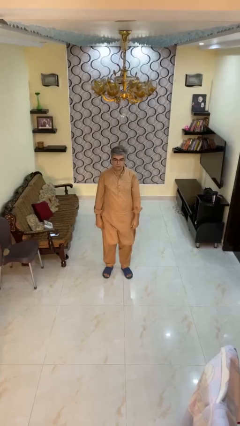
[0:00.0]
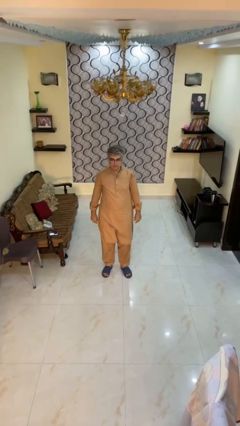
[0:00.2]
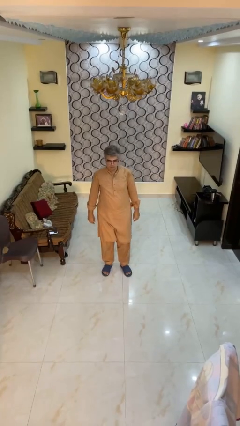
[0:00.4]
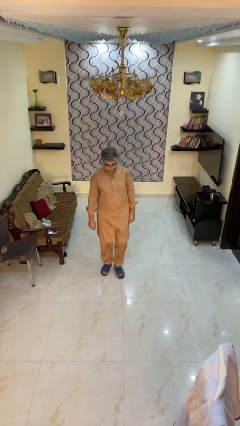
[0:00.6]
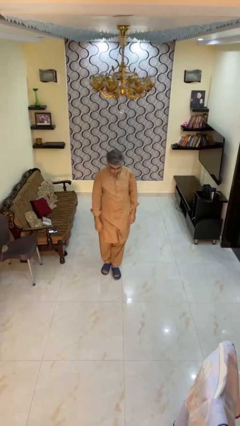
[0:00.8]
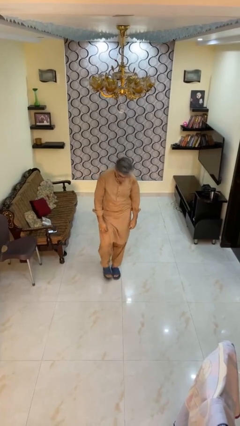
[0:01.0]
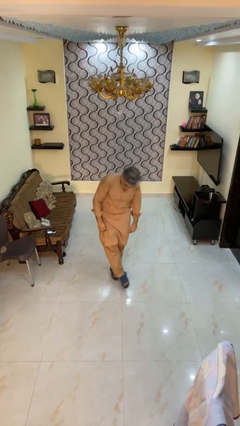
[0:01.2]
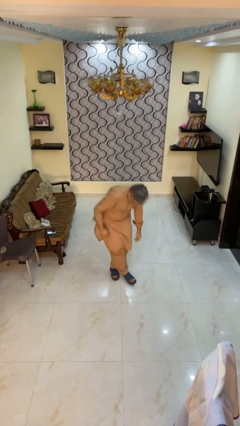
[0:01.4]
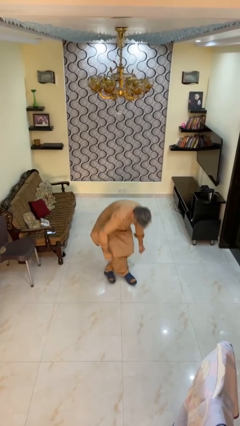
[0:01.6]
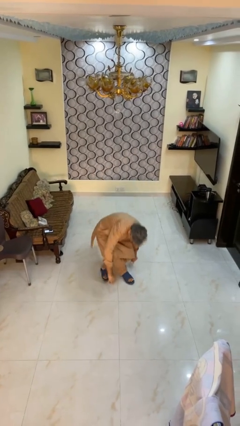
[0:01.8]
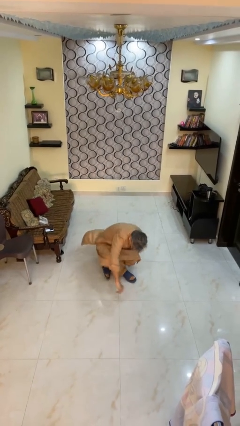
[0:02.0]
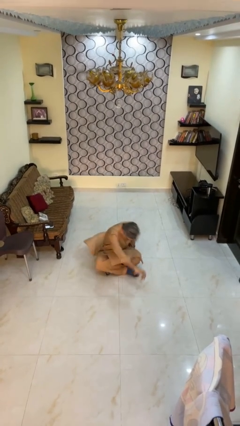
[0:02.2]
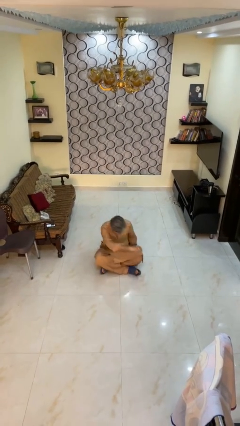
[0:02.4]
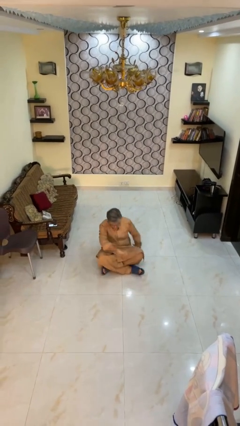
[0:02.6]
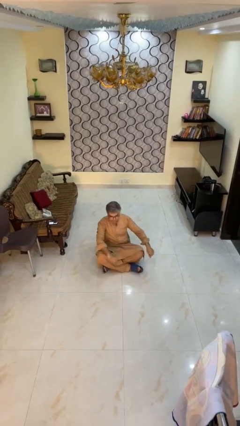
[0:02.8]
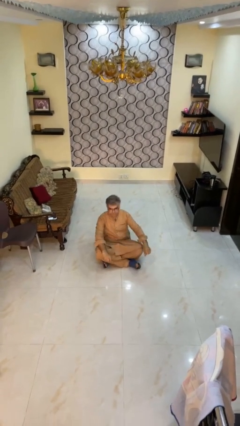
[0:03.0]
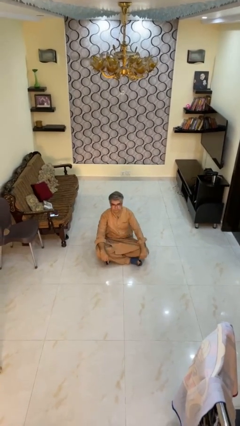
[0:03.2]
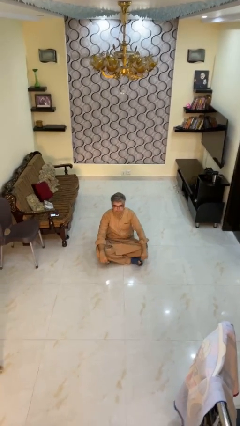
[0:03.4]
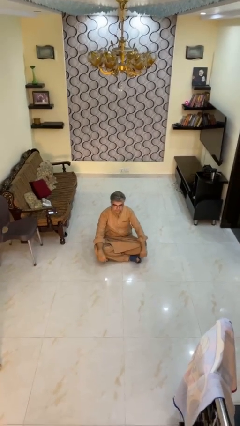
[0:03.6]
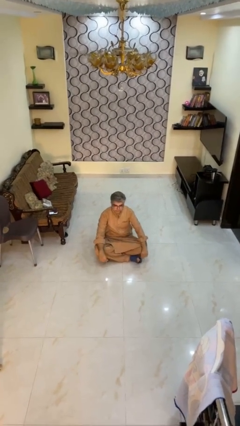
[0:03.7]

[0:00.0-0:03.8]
person sits crisscross

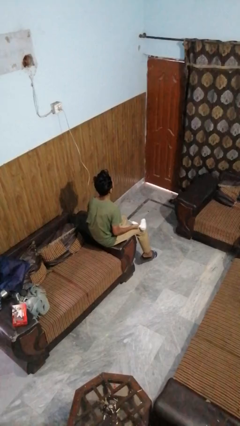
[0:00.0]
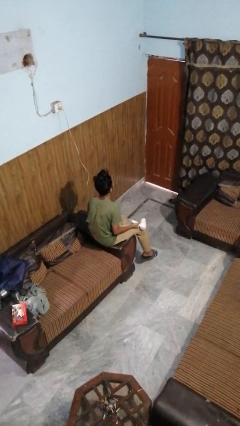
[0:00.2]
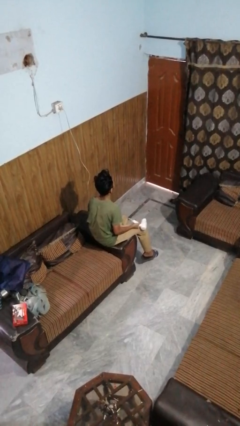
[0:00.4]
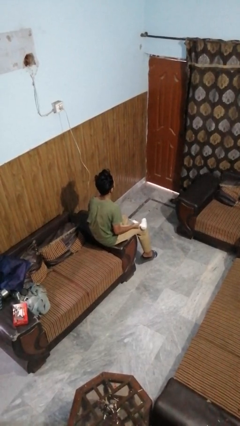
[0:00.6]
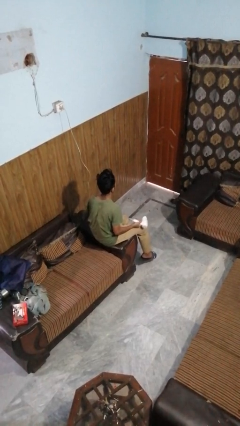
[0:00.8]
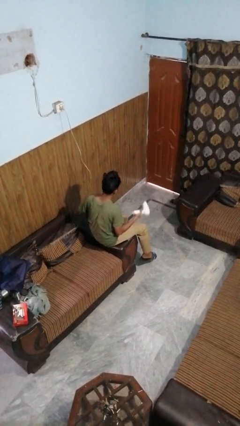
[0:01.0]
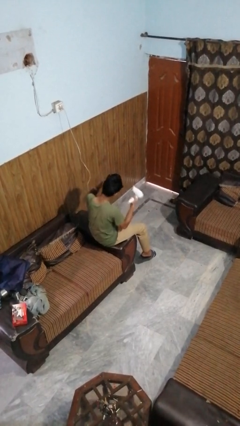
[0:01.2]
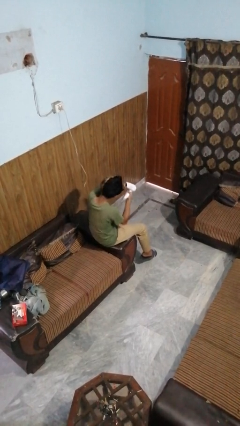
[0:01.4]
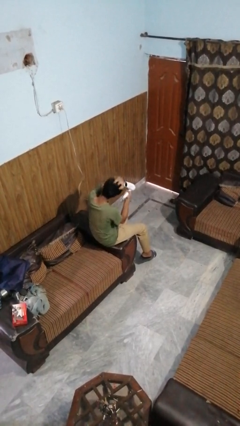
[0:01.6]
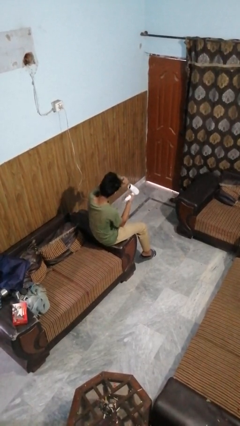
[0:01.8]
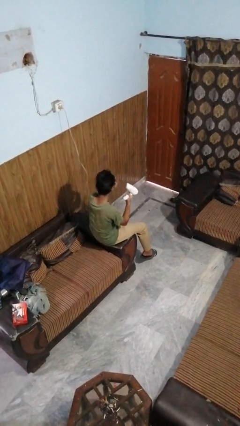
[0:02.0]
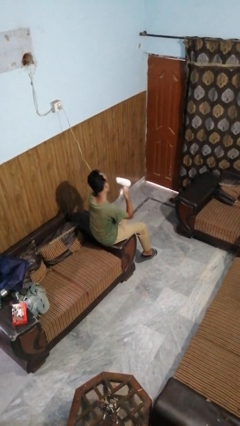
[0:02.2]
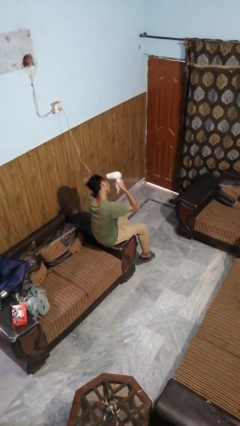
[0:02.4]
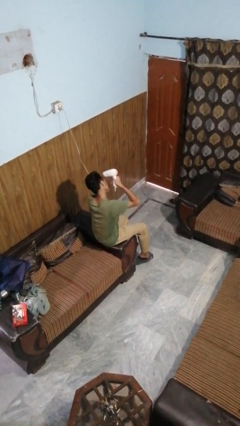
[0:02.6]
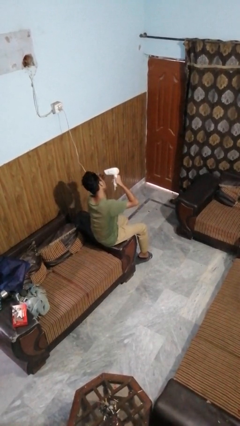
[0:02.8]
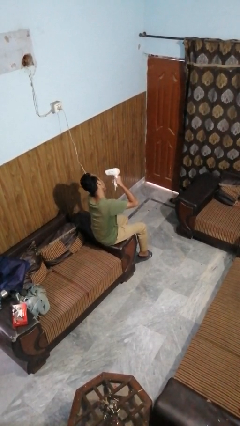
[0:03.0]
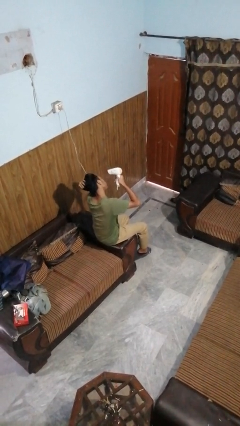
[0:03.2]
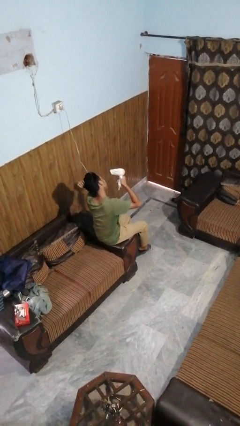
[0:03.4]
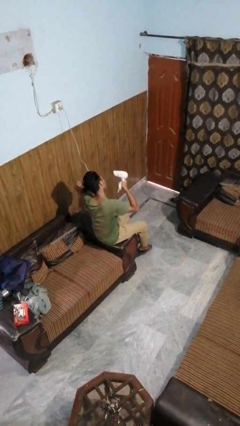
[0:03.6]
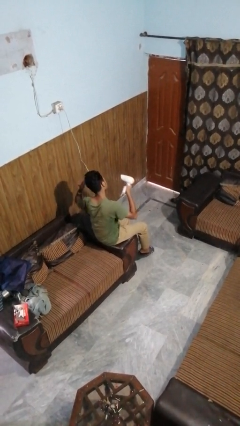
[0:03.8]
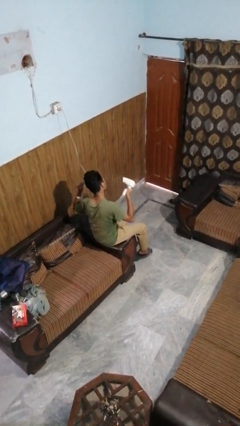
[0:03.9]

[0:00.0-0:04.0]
person dries hair with hairdryer

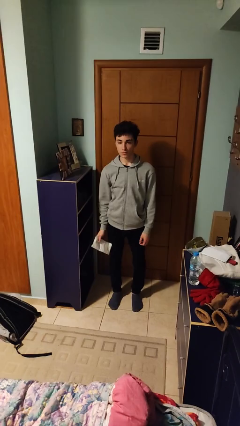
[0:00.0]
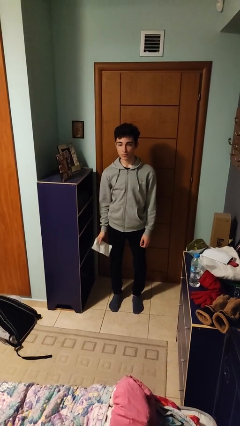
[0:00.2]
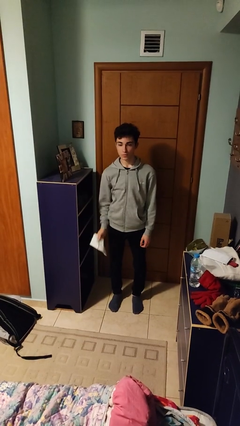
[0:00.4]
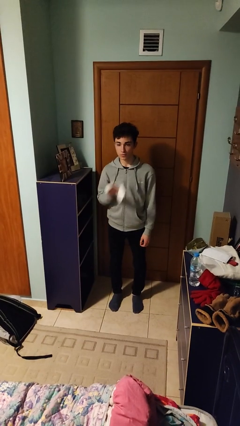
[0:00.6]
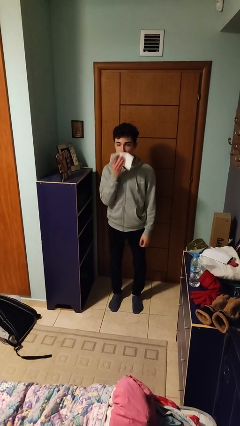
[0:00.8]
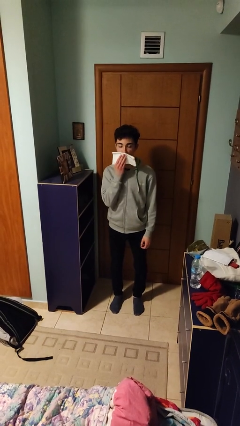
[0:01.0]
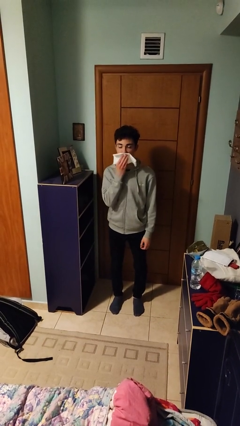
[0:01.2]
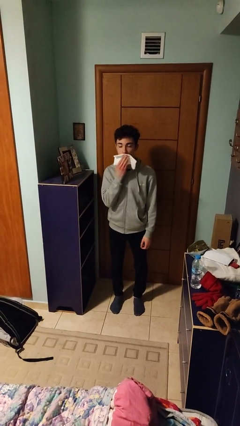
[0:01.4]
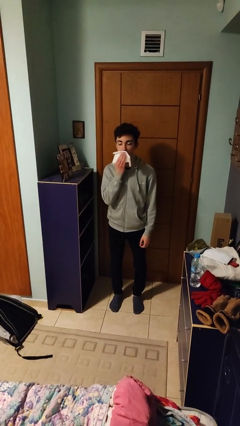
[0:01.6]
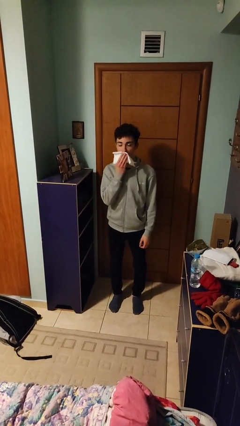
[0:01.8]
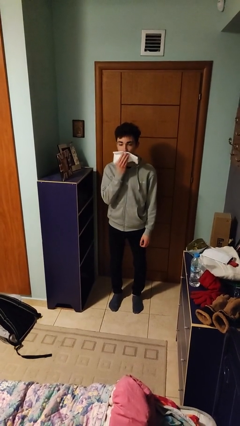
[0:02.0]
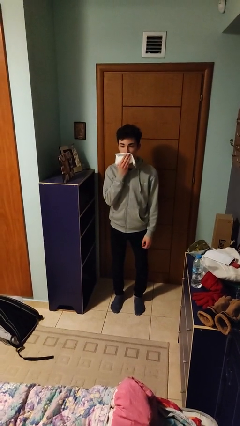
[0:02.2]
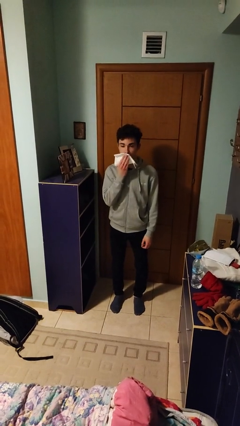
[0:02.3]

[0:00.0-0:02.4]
person wipes mouth with napkin

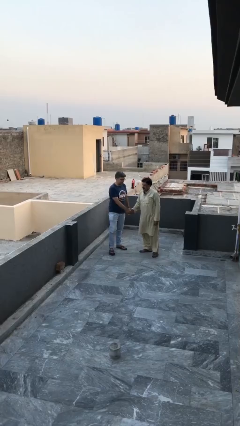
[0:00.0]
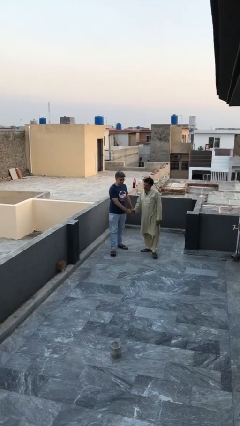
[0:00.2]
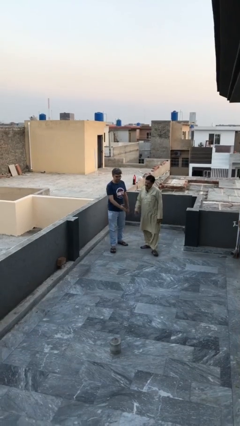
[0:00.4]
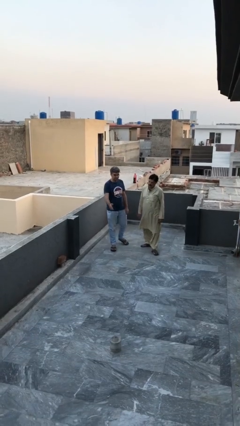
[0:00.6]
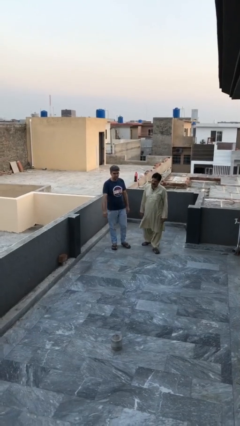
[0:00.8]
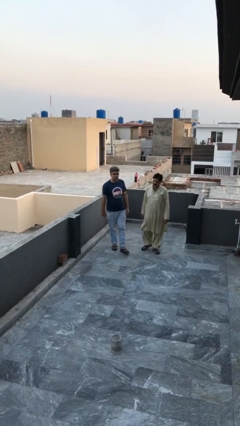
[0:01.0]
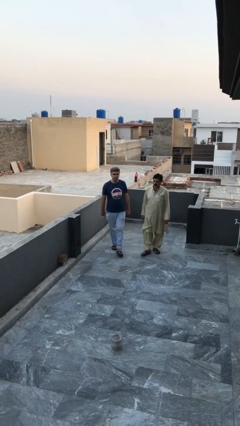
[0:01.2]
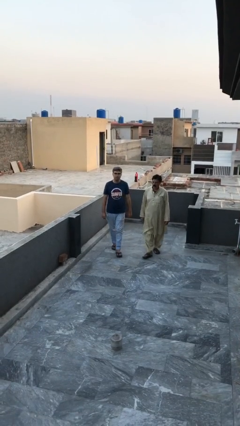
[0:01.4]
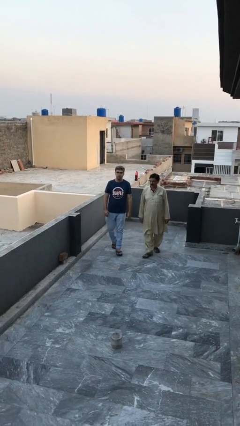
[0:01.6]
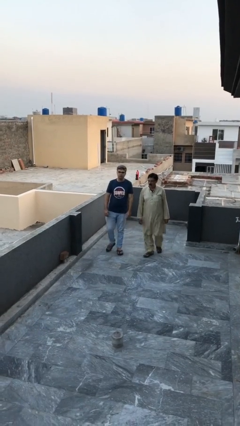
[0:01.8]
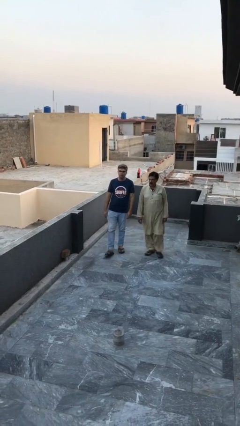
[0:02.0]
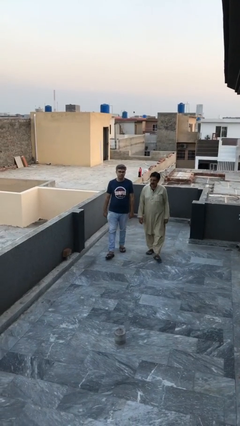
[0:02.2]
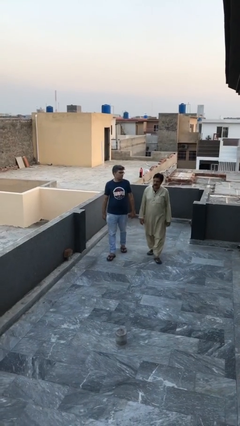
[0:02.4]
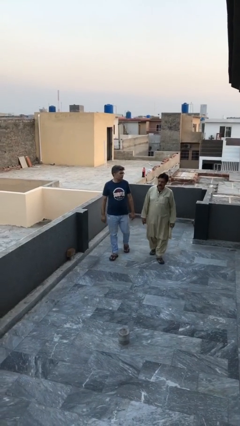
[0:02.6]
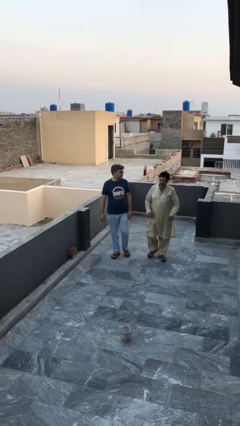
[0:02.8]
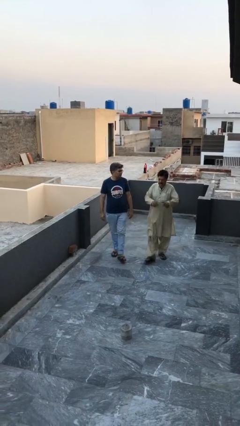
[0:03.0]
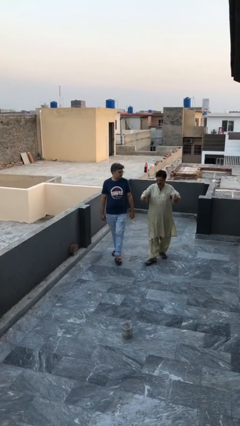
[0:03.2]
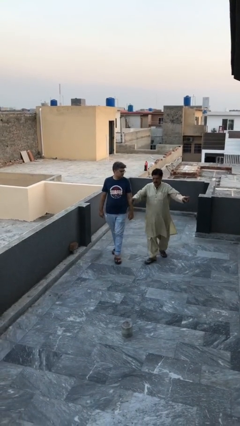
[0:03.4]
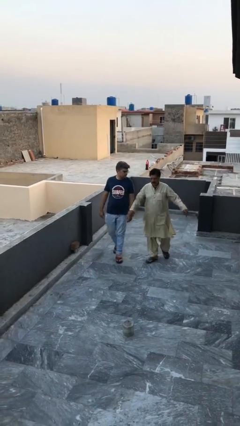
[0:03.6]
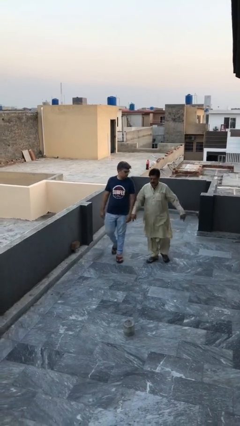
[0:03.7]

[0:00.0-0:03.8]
person talks to person

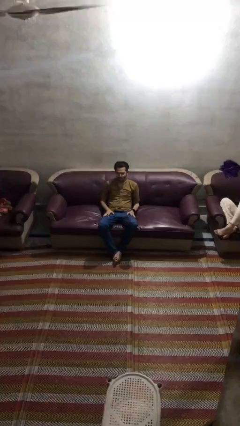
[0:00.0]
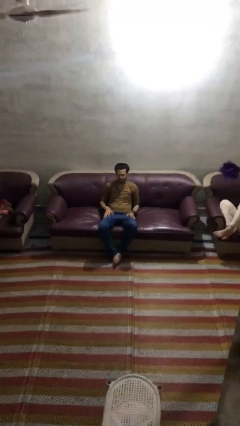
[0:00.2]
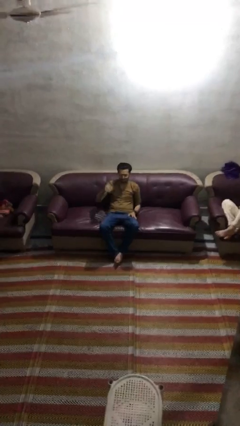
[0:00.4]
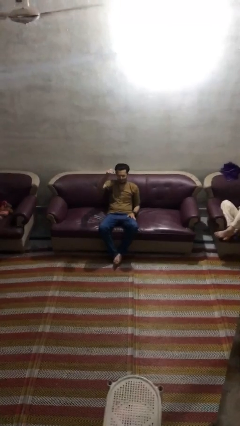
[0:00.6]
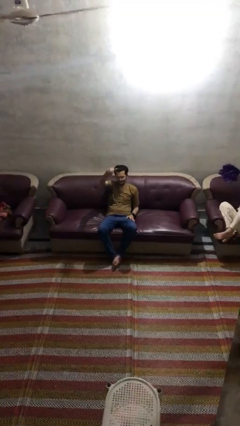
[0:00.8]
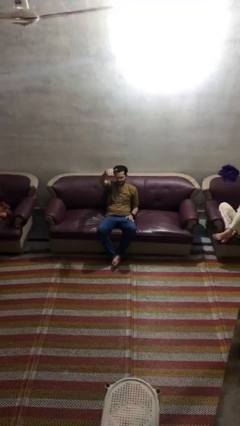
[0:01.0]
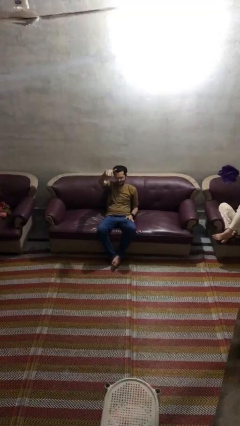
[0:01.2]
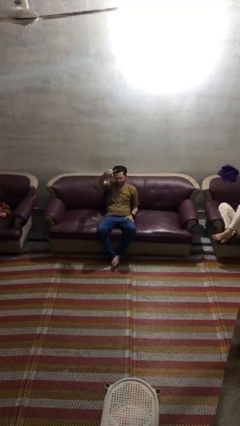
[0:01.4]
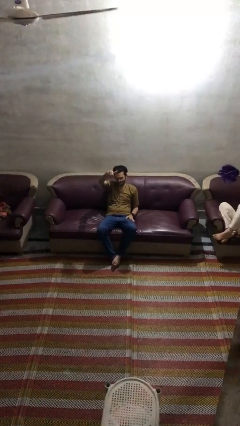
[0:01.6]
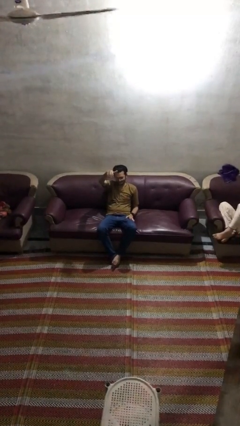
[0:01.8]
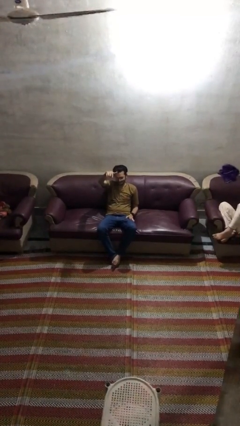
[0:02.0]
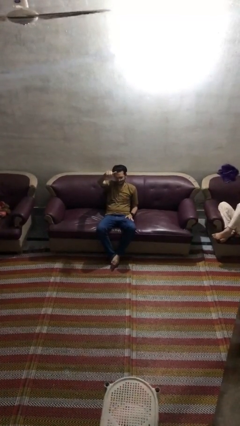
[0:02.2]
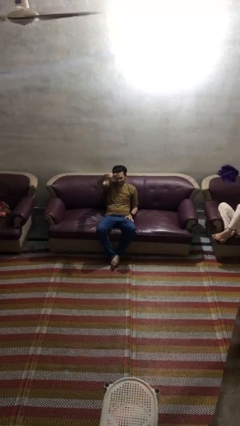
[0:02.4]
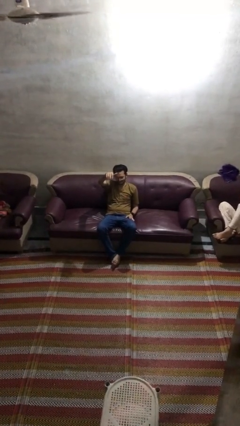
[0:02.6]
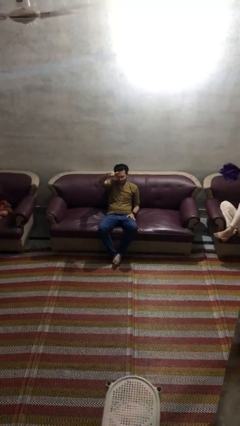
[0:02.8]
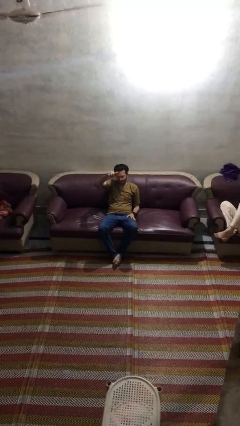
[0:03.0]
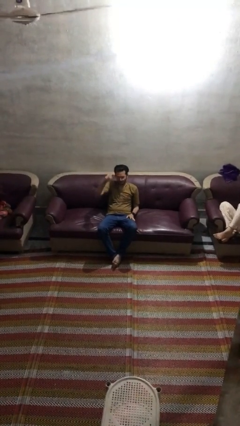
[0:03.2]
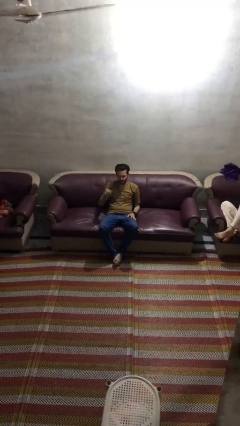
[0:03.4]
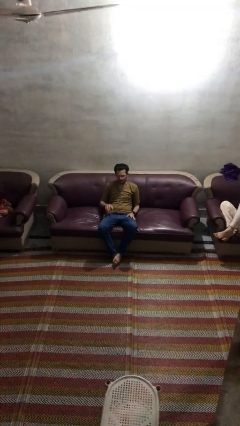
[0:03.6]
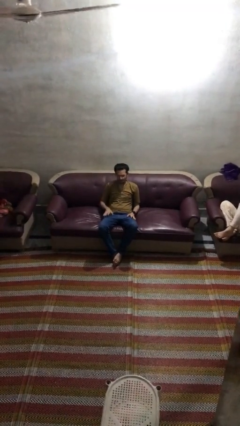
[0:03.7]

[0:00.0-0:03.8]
person gestures come here
